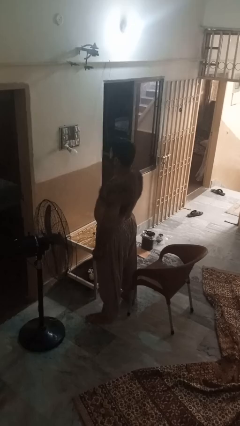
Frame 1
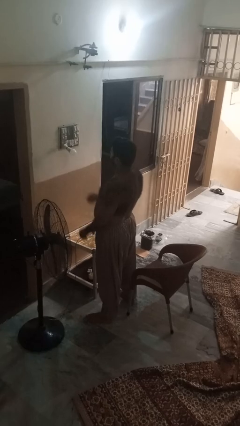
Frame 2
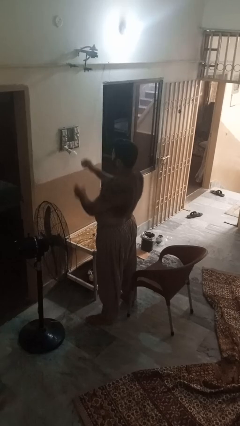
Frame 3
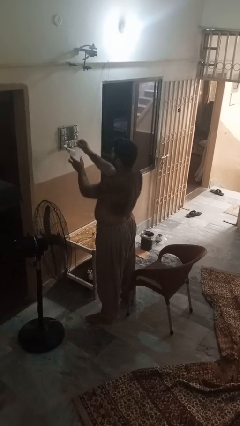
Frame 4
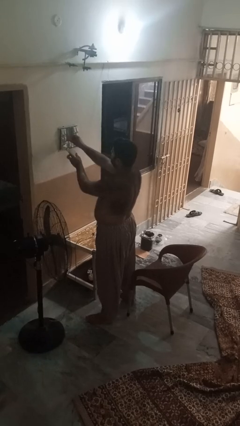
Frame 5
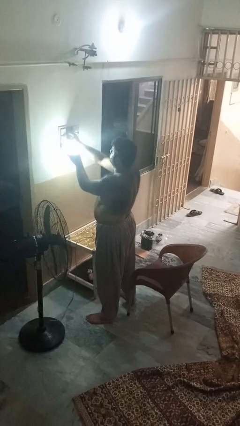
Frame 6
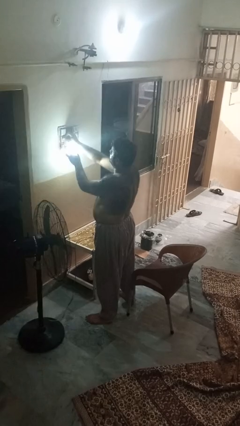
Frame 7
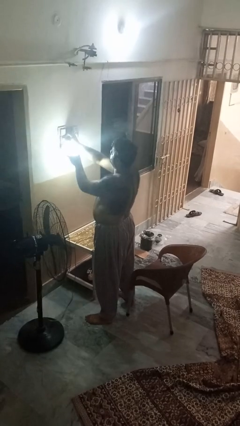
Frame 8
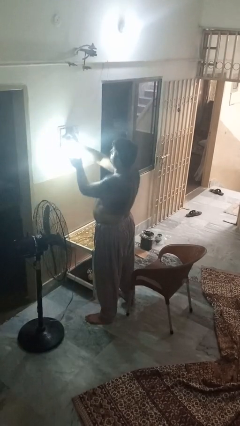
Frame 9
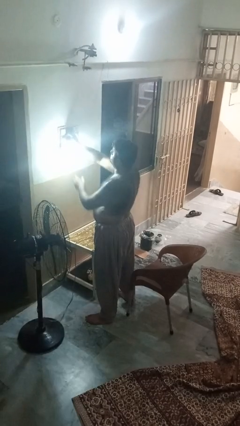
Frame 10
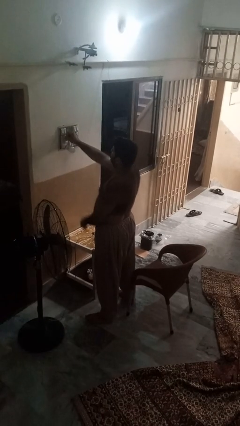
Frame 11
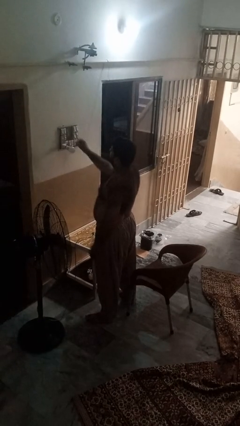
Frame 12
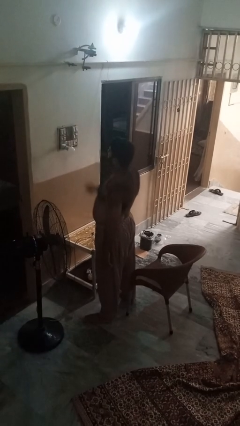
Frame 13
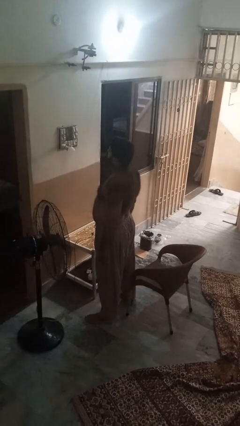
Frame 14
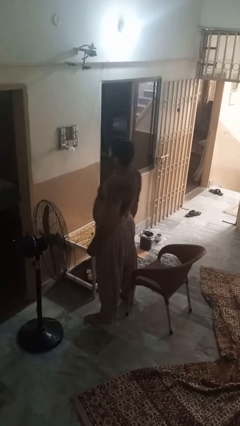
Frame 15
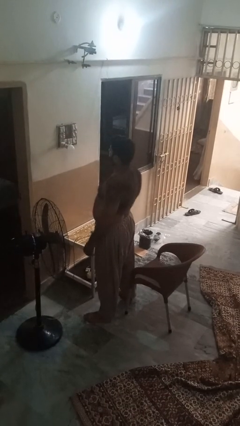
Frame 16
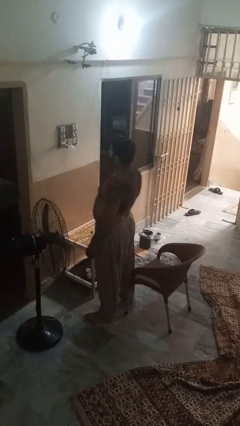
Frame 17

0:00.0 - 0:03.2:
person turns off lamp

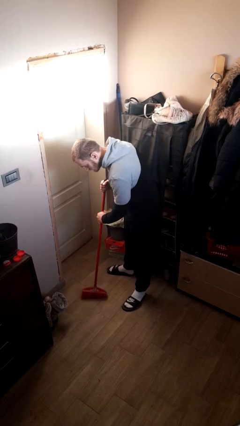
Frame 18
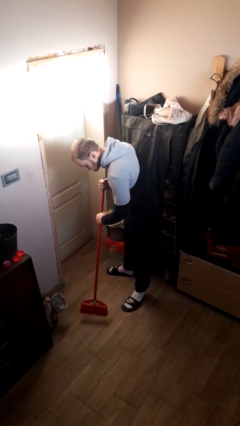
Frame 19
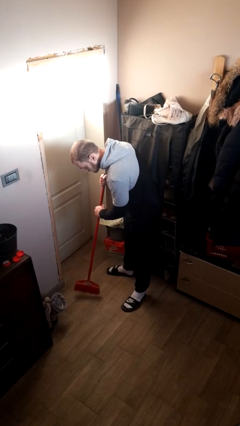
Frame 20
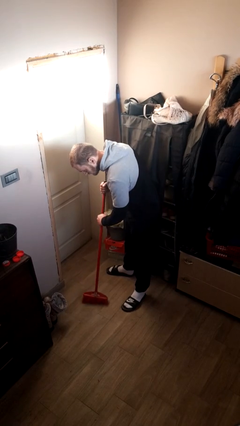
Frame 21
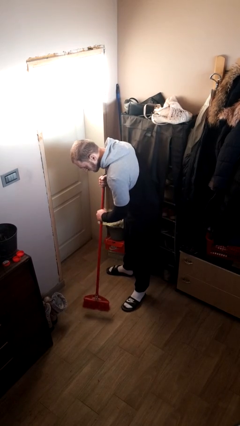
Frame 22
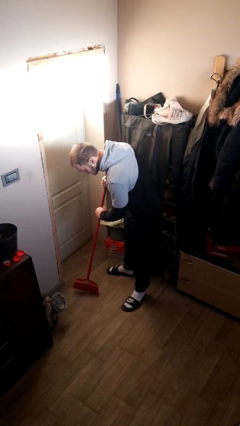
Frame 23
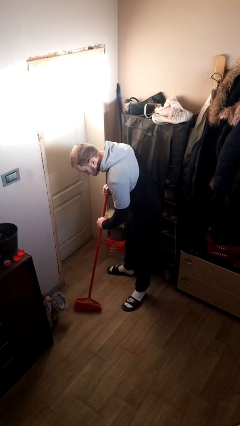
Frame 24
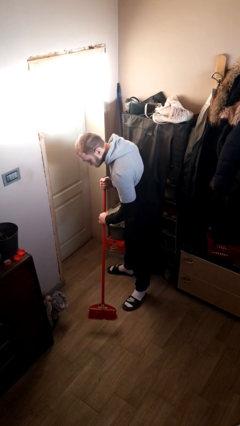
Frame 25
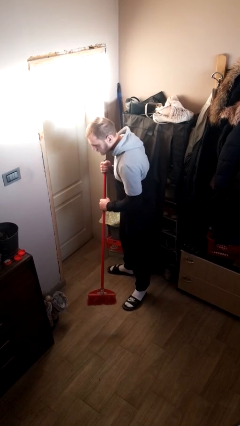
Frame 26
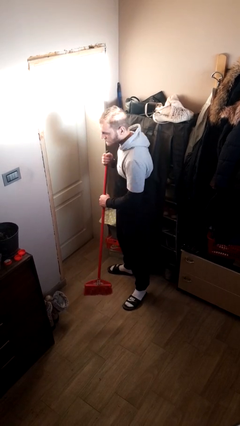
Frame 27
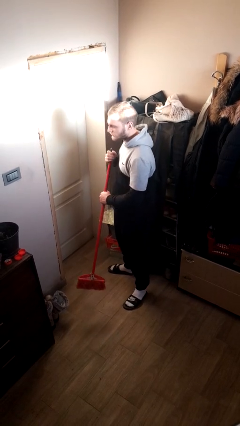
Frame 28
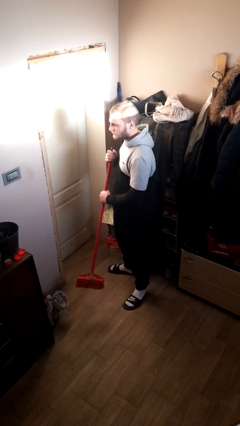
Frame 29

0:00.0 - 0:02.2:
person sweeps floor

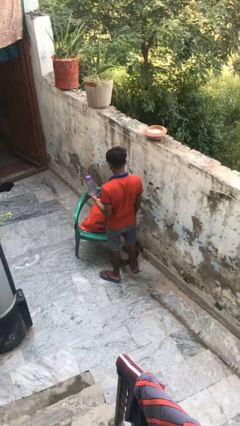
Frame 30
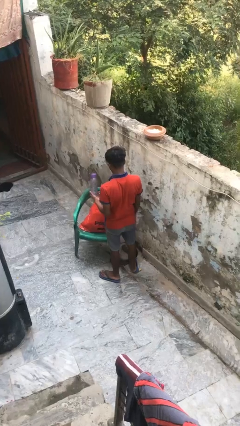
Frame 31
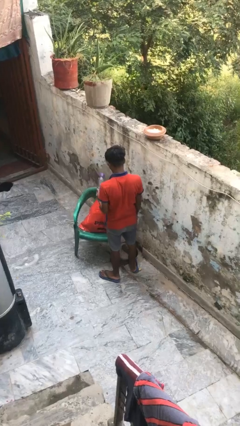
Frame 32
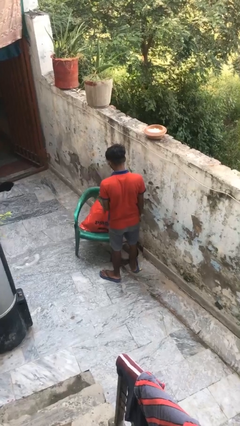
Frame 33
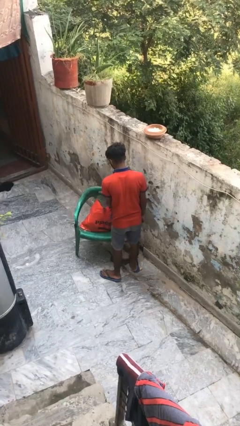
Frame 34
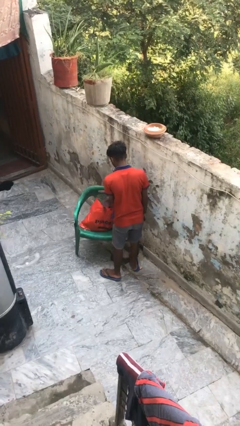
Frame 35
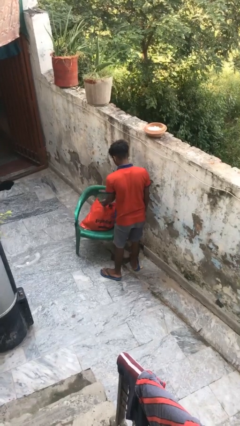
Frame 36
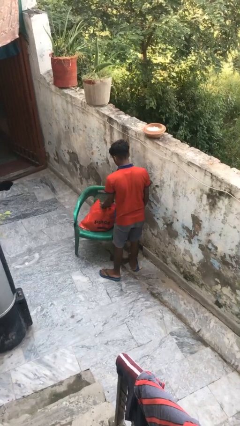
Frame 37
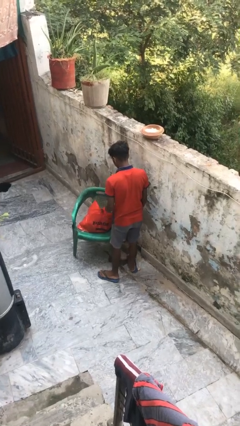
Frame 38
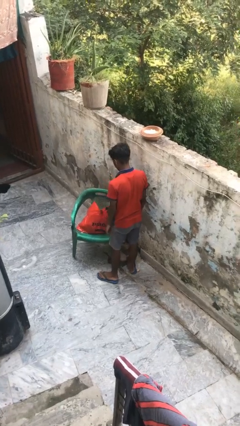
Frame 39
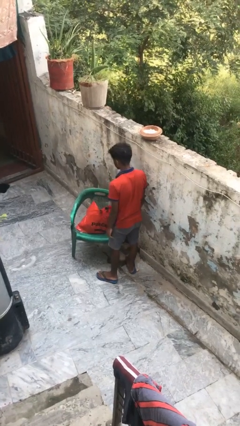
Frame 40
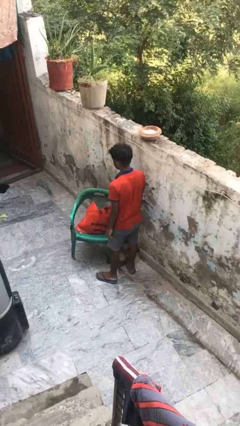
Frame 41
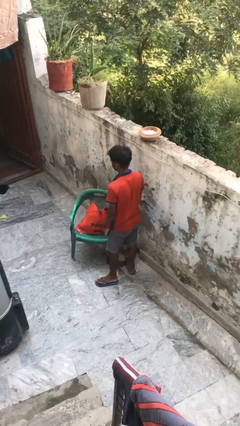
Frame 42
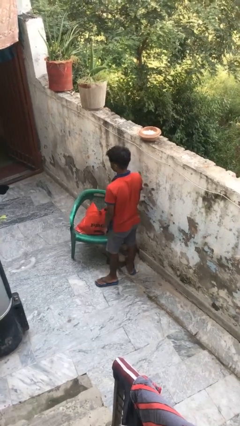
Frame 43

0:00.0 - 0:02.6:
person puts object into bag

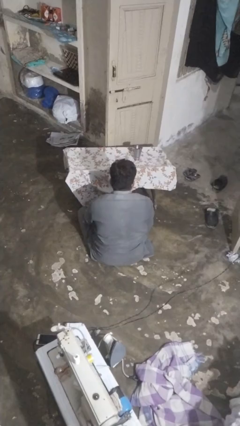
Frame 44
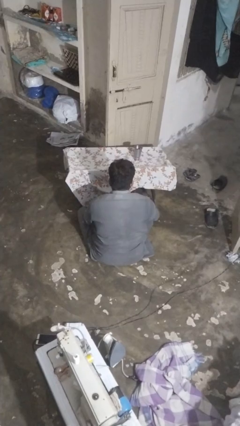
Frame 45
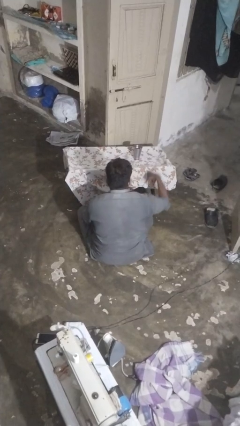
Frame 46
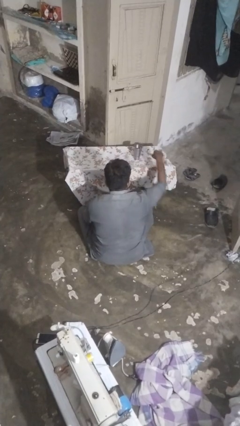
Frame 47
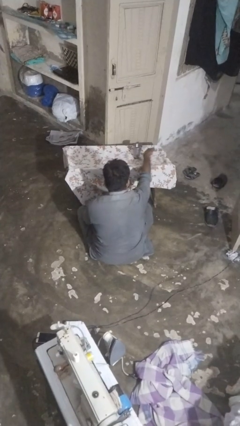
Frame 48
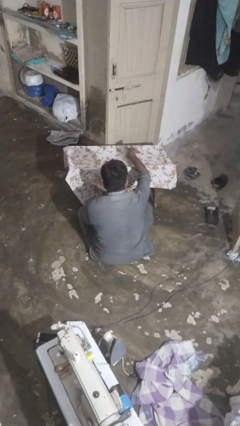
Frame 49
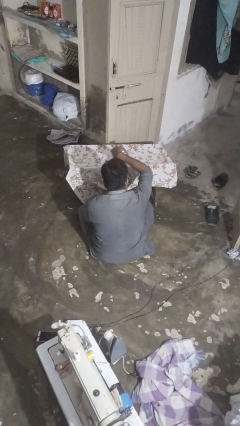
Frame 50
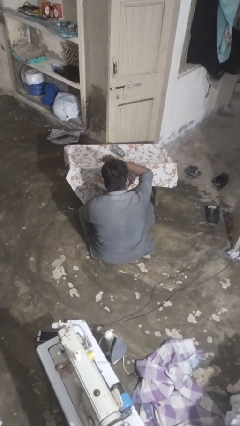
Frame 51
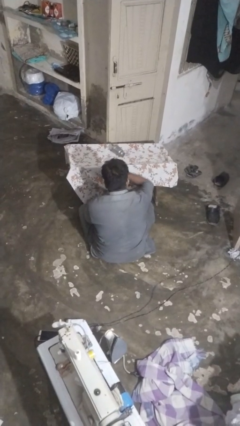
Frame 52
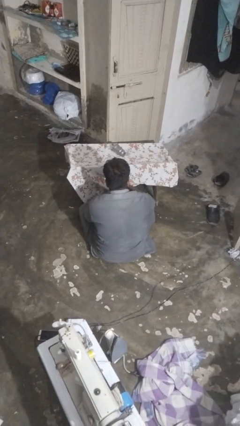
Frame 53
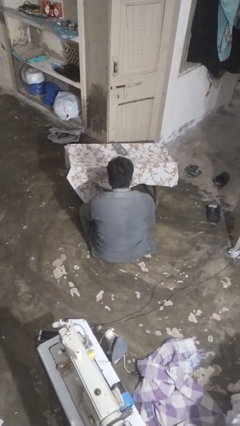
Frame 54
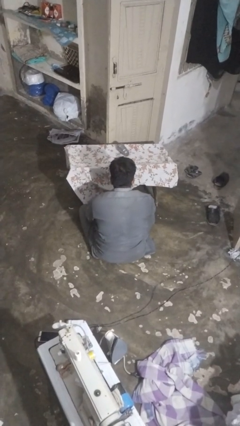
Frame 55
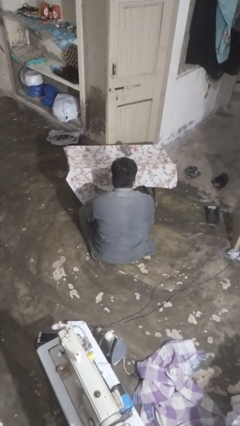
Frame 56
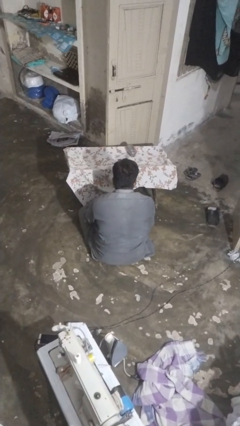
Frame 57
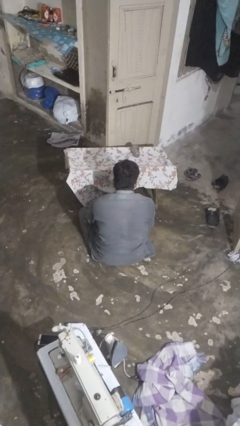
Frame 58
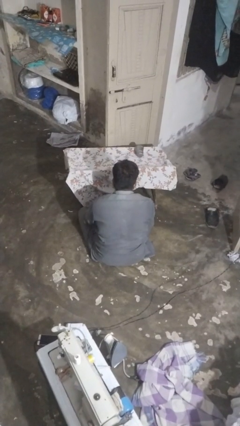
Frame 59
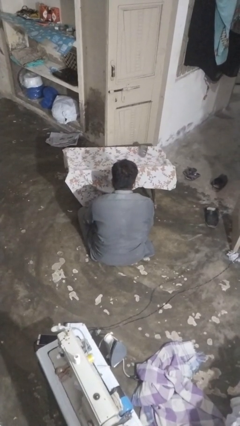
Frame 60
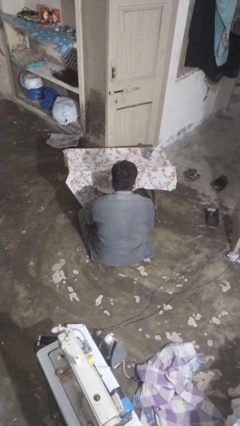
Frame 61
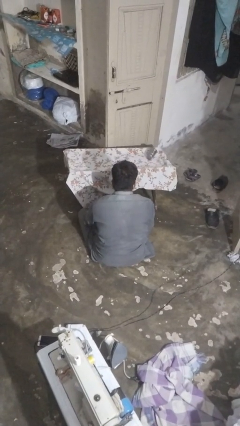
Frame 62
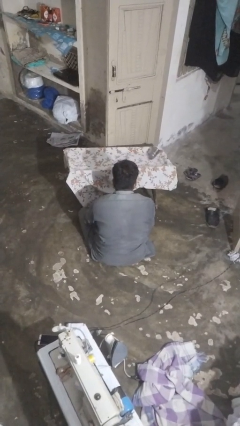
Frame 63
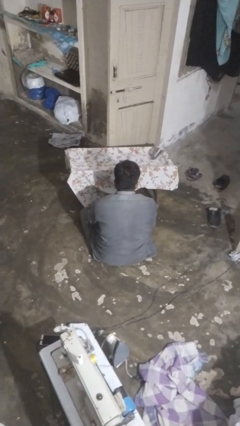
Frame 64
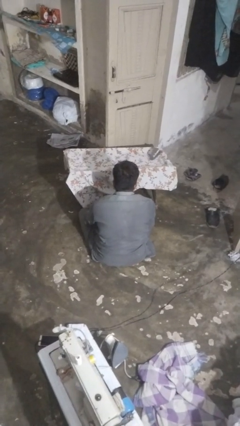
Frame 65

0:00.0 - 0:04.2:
person knocks over glass

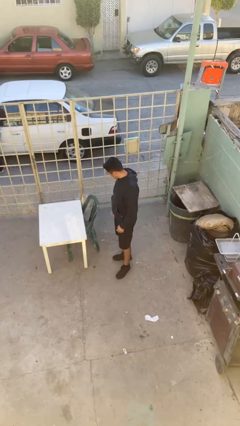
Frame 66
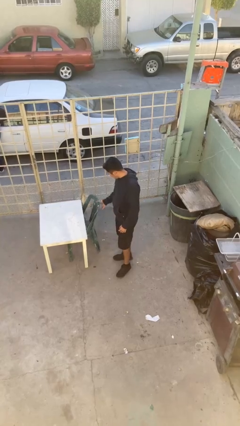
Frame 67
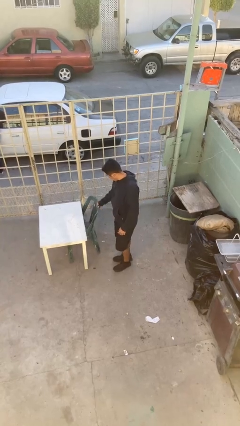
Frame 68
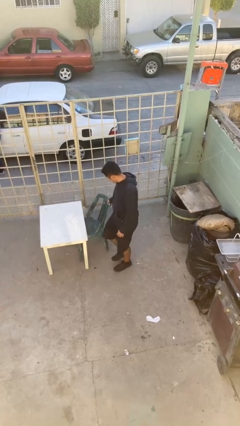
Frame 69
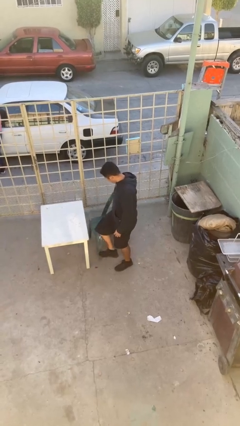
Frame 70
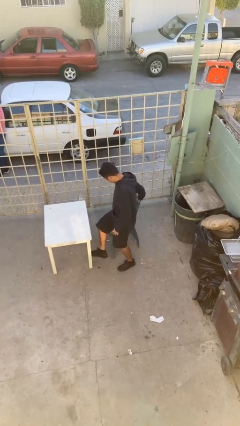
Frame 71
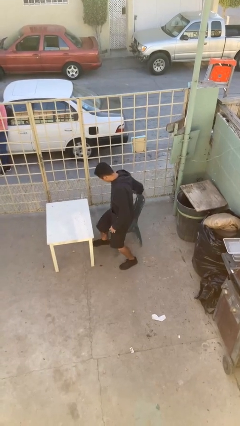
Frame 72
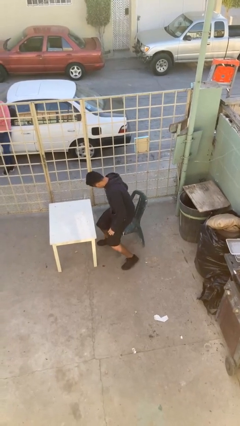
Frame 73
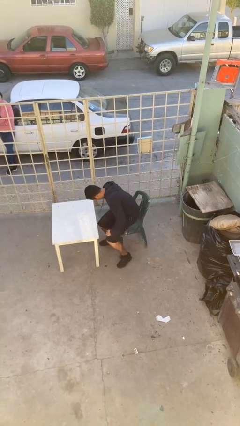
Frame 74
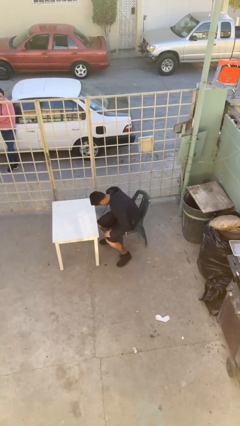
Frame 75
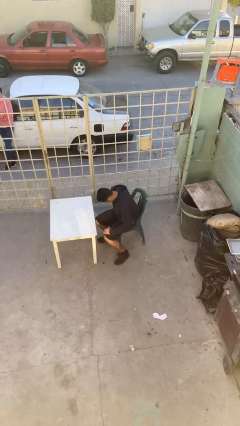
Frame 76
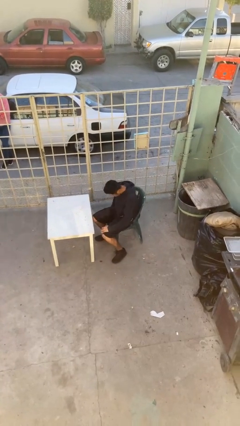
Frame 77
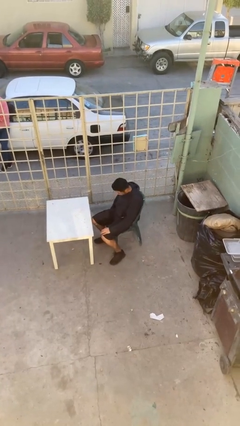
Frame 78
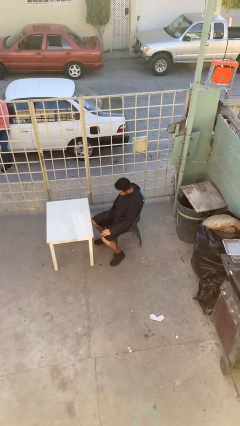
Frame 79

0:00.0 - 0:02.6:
person sits down

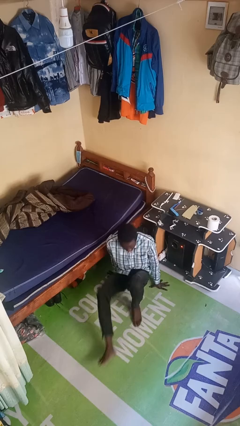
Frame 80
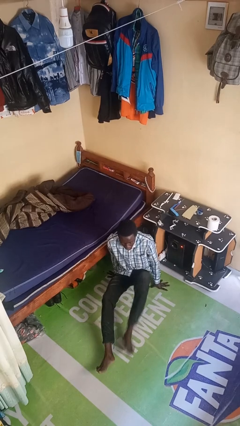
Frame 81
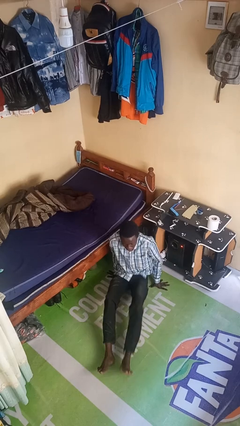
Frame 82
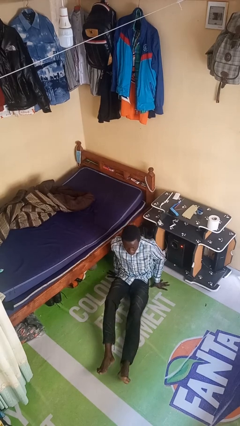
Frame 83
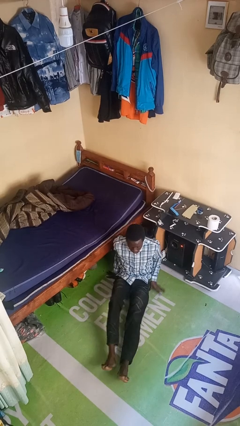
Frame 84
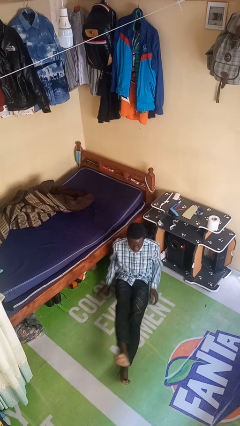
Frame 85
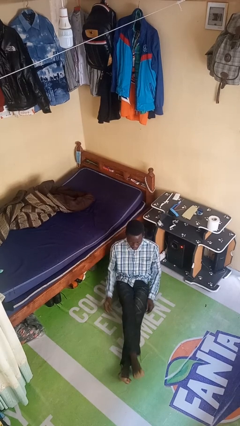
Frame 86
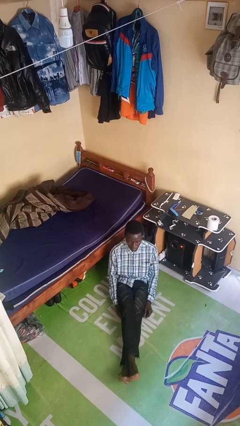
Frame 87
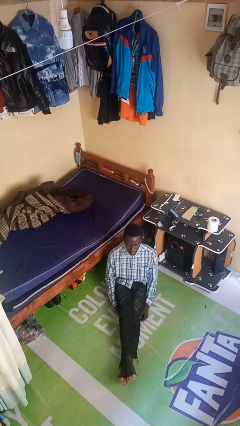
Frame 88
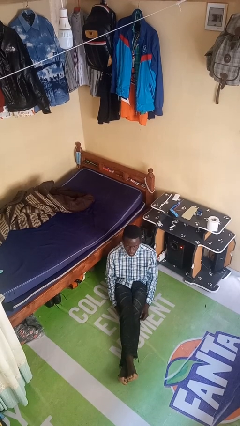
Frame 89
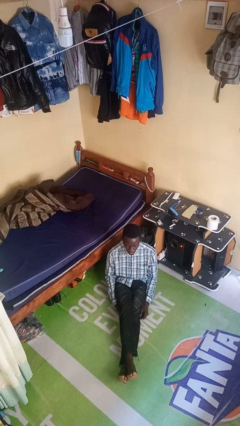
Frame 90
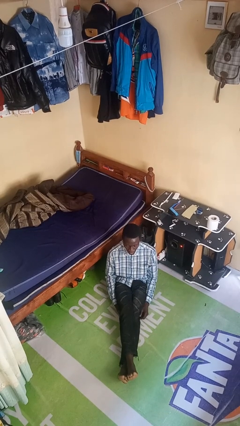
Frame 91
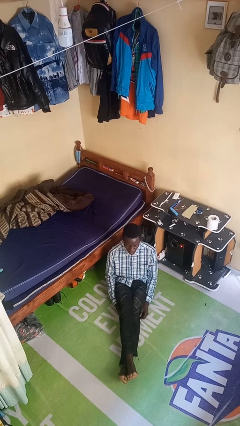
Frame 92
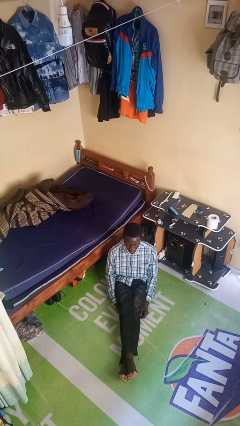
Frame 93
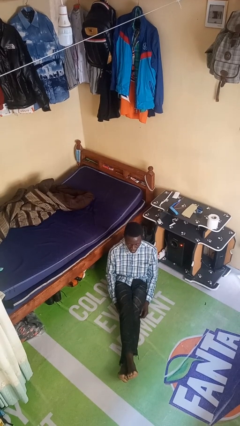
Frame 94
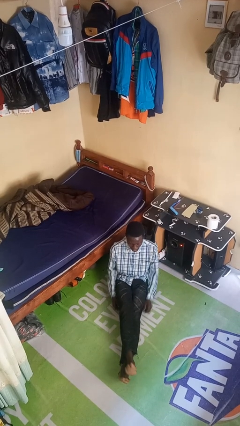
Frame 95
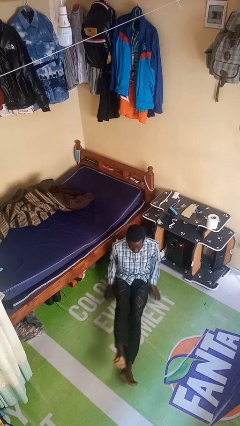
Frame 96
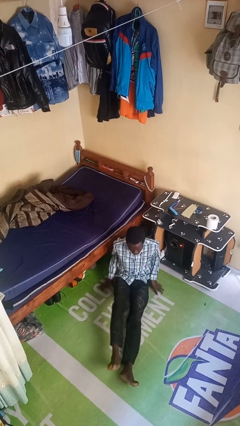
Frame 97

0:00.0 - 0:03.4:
person sits crisscross
